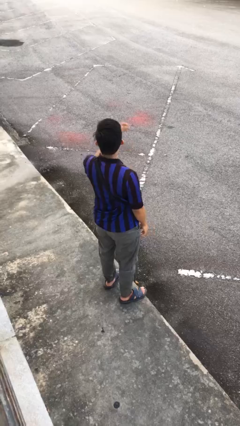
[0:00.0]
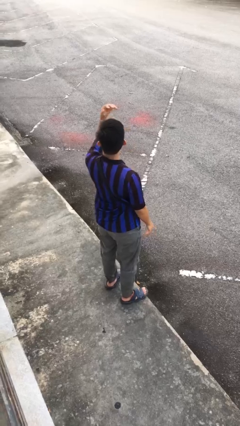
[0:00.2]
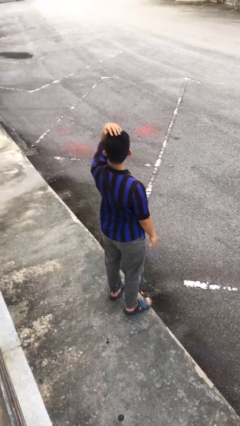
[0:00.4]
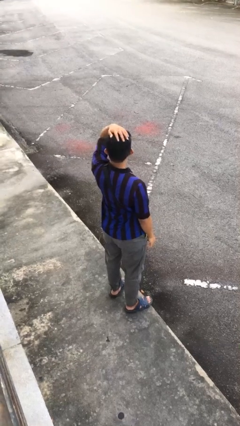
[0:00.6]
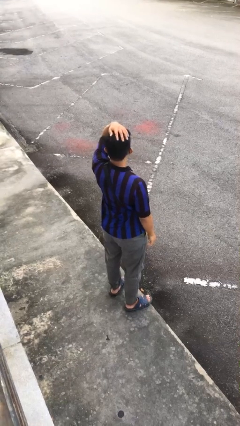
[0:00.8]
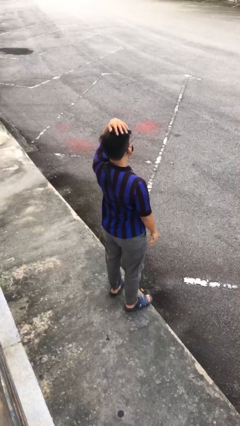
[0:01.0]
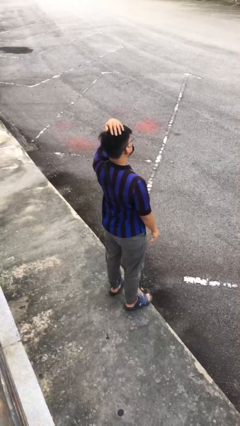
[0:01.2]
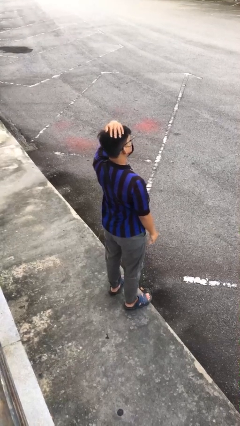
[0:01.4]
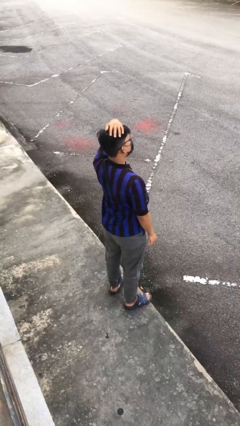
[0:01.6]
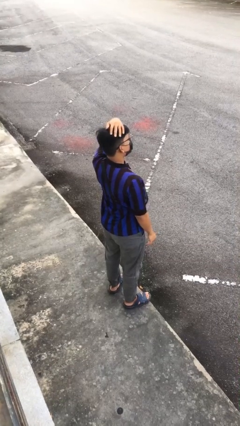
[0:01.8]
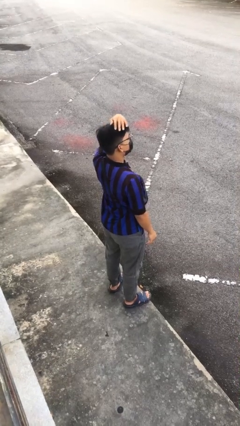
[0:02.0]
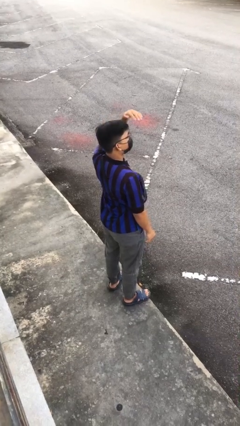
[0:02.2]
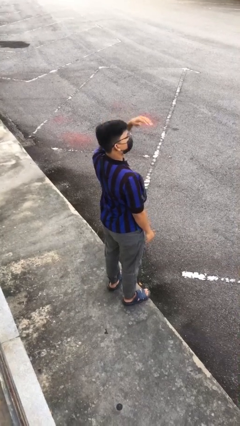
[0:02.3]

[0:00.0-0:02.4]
person pats head

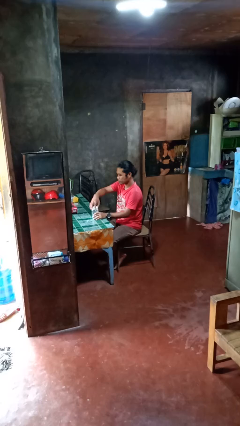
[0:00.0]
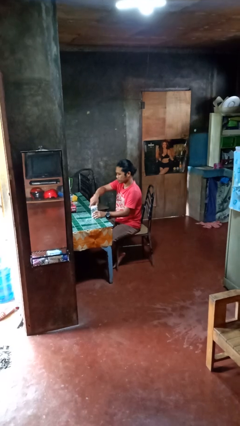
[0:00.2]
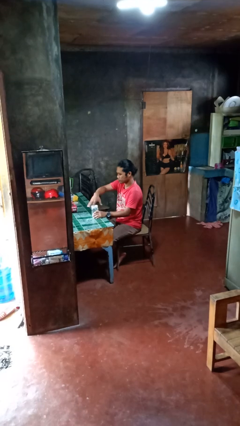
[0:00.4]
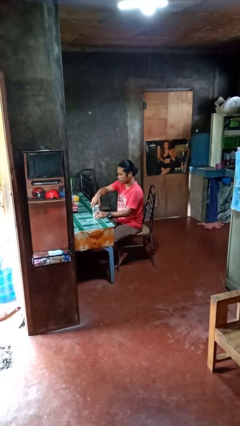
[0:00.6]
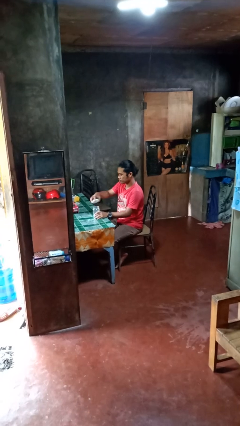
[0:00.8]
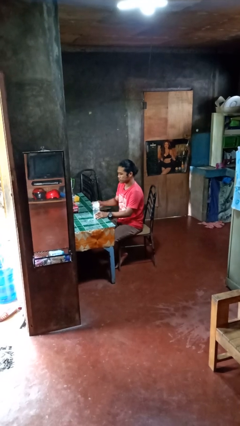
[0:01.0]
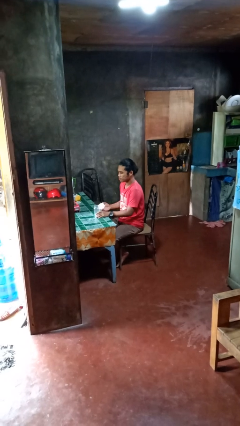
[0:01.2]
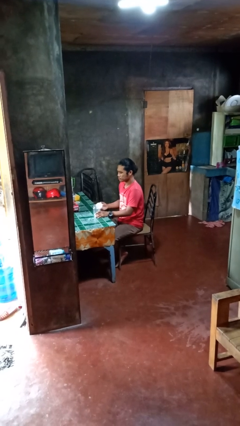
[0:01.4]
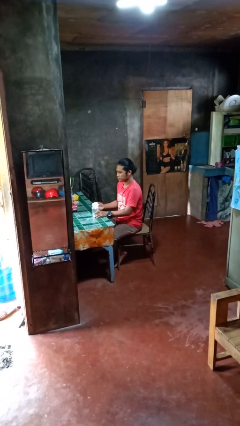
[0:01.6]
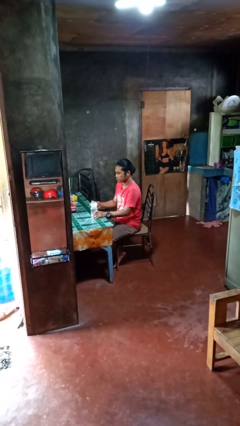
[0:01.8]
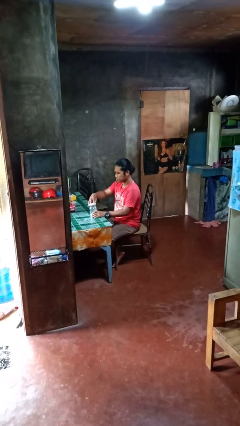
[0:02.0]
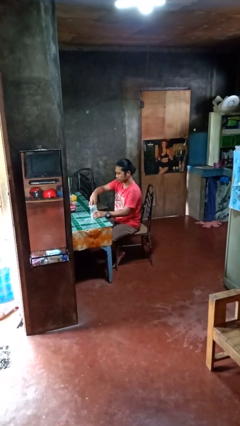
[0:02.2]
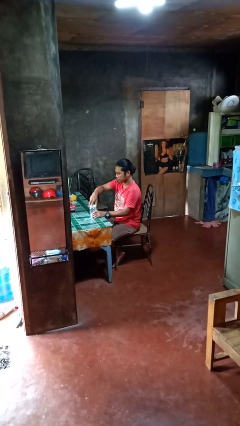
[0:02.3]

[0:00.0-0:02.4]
person opens jar

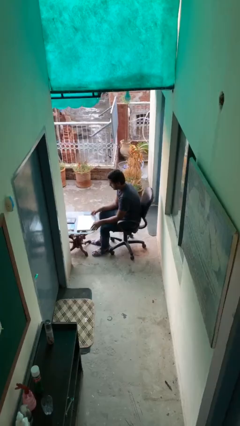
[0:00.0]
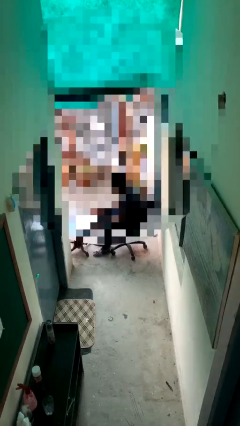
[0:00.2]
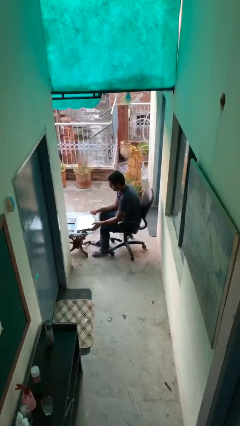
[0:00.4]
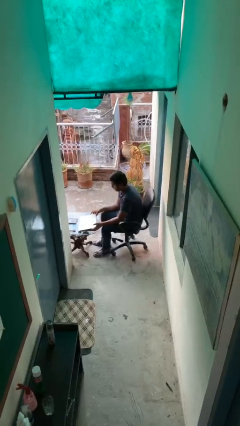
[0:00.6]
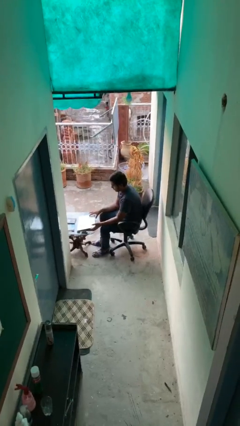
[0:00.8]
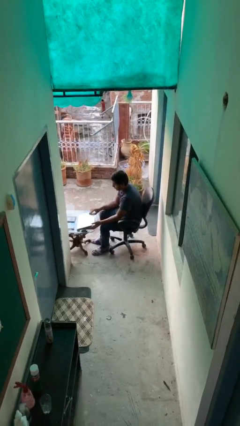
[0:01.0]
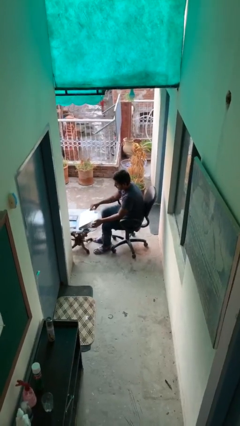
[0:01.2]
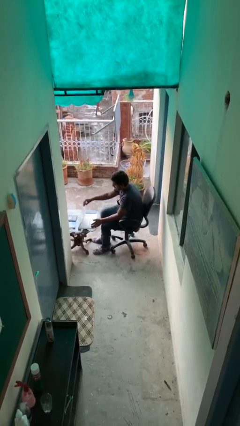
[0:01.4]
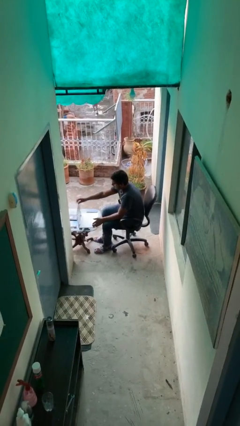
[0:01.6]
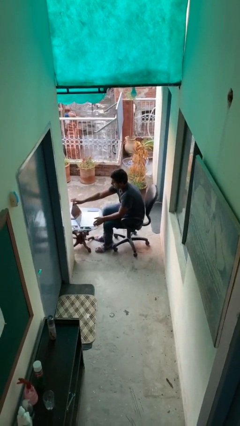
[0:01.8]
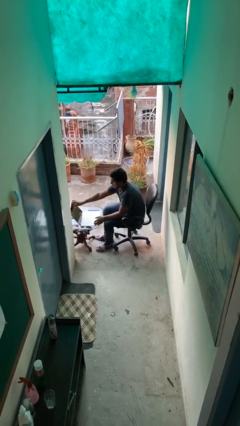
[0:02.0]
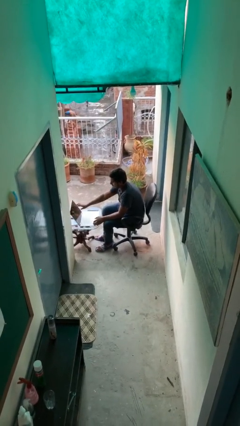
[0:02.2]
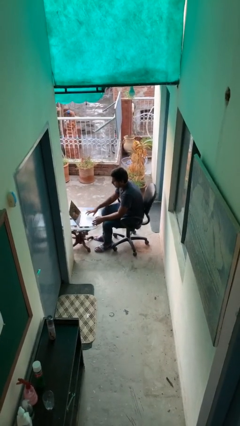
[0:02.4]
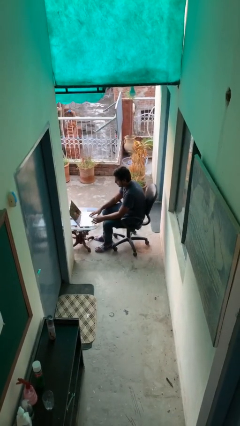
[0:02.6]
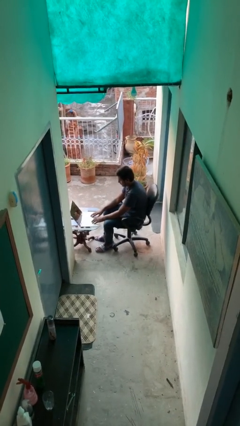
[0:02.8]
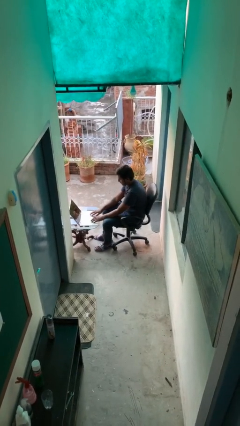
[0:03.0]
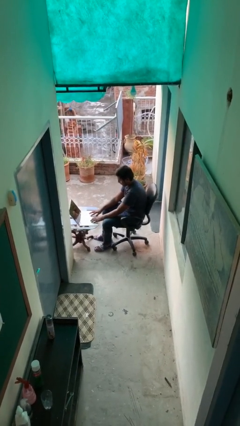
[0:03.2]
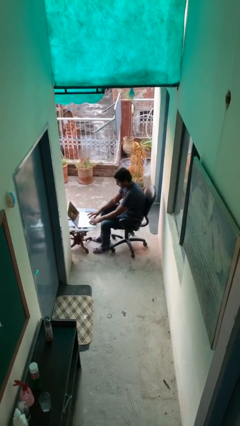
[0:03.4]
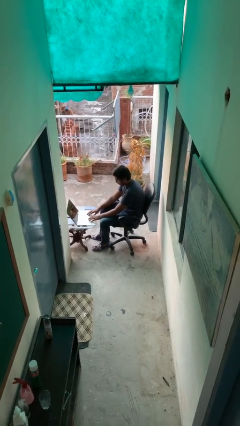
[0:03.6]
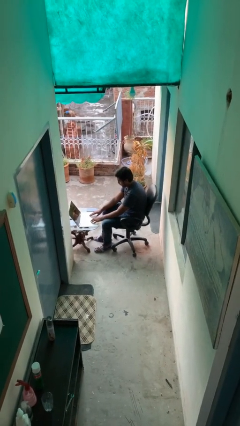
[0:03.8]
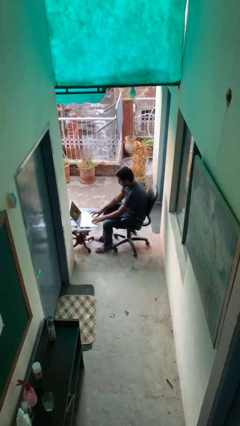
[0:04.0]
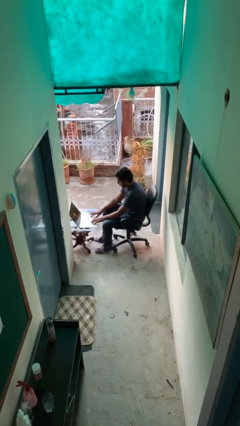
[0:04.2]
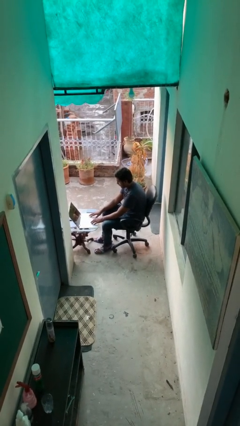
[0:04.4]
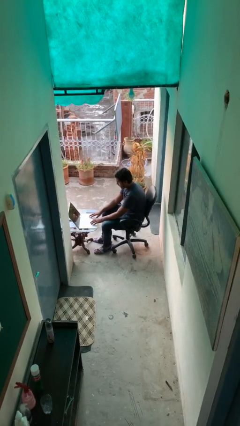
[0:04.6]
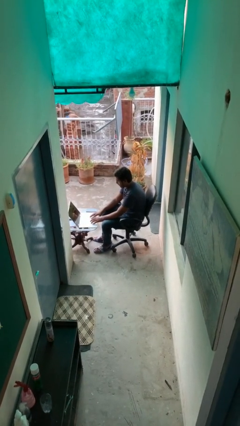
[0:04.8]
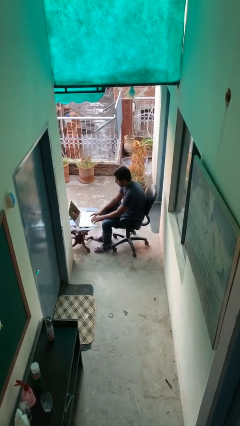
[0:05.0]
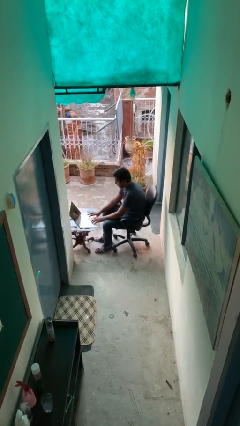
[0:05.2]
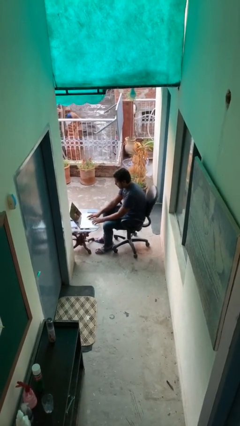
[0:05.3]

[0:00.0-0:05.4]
person interacts with laptop

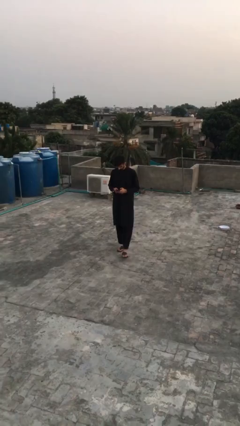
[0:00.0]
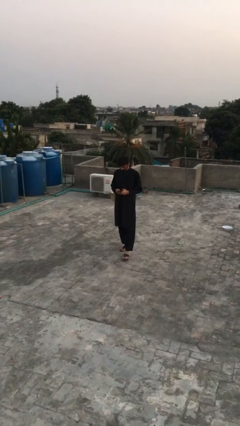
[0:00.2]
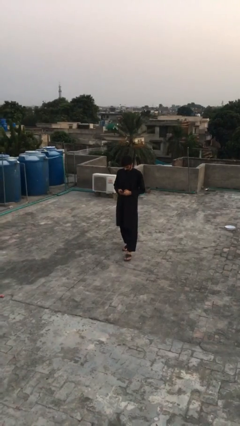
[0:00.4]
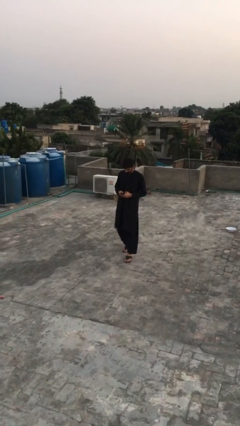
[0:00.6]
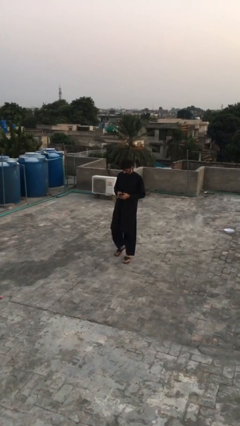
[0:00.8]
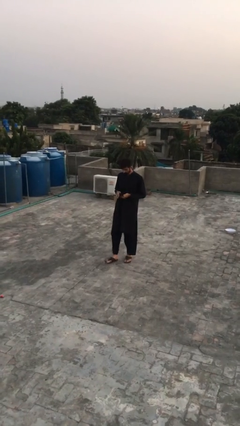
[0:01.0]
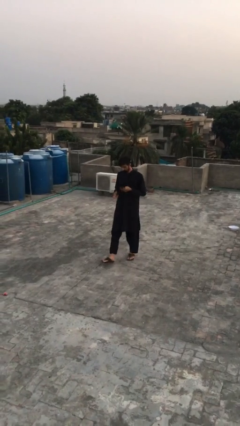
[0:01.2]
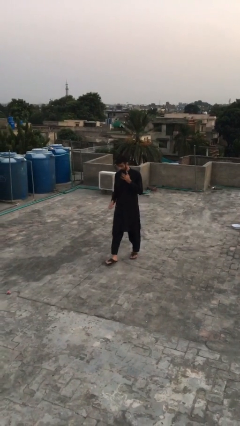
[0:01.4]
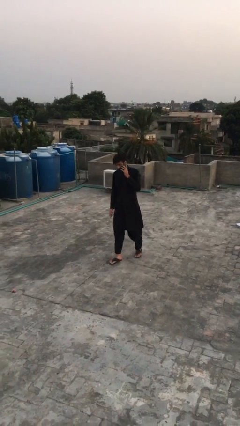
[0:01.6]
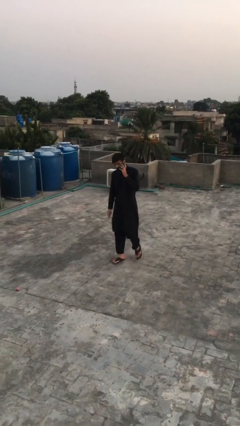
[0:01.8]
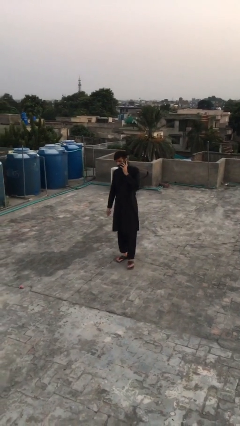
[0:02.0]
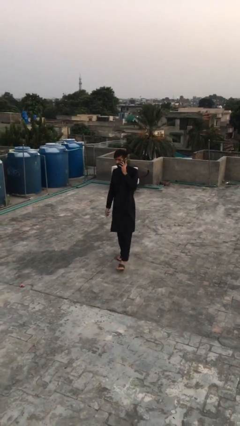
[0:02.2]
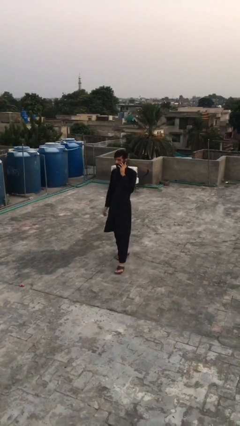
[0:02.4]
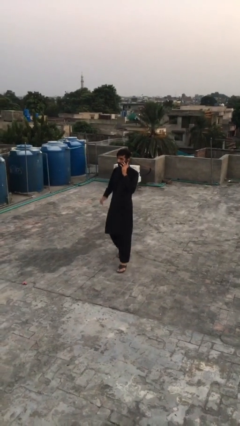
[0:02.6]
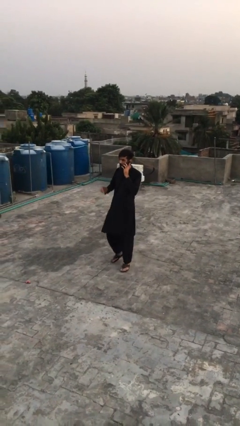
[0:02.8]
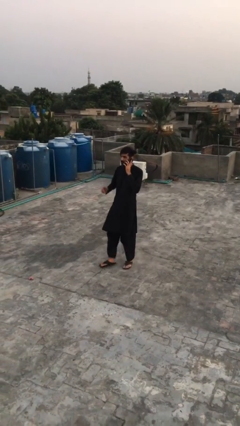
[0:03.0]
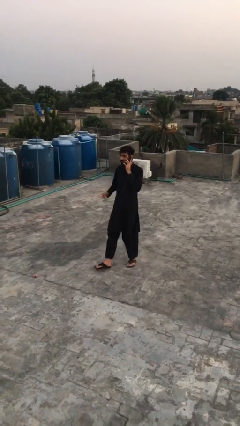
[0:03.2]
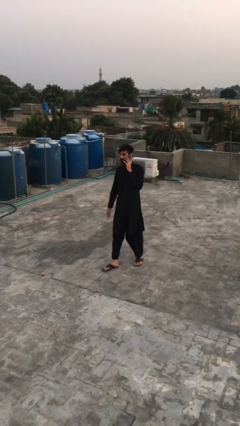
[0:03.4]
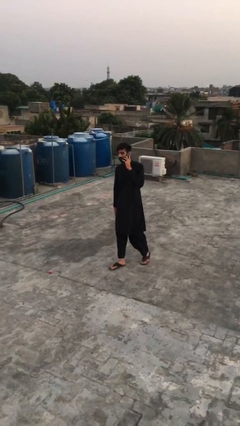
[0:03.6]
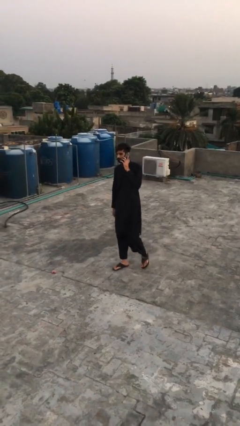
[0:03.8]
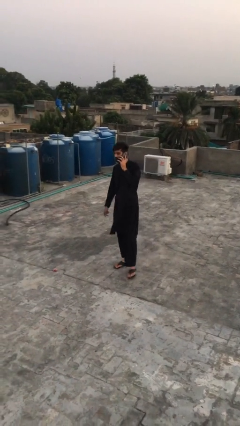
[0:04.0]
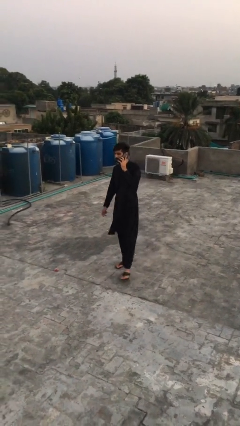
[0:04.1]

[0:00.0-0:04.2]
person talks on phone

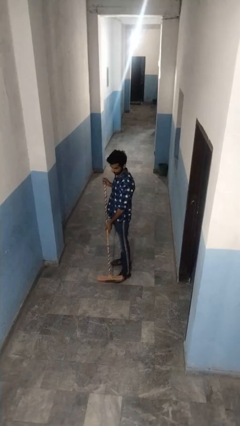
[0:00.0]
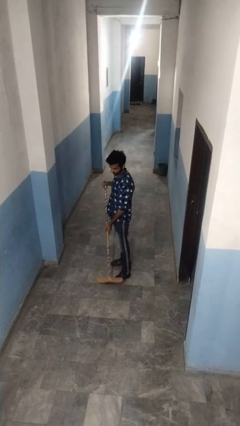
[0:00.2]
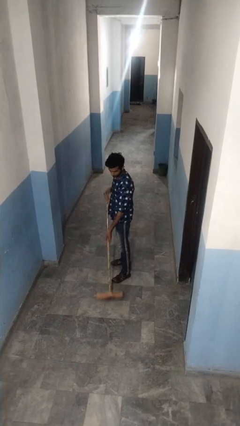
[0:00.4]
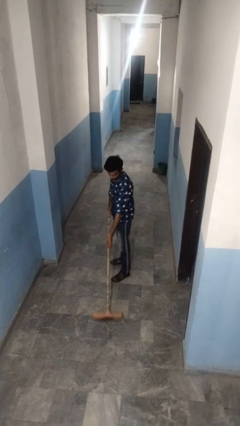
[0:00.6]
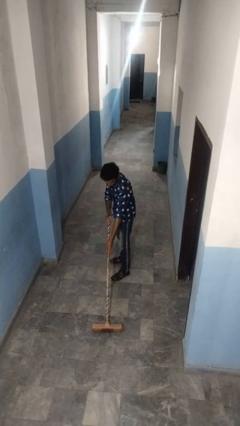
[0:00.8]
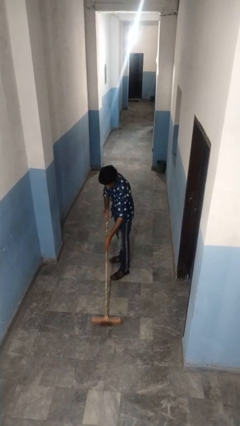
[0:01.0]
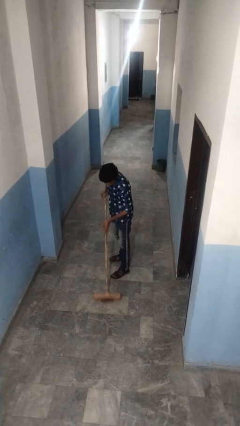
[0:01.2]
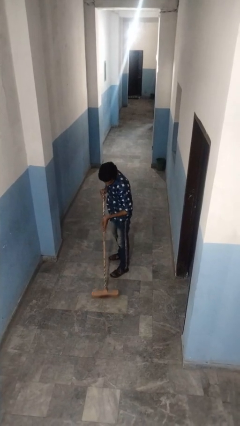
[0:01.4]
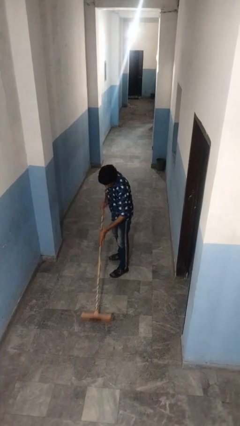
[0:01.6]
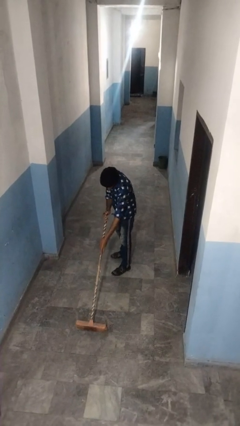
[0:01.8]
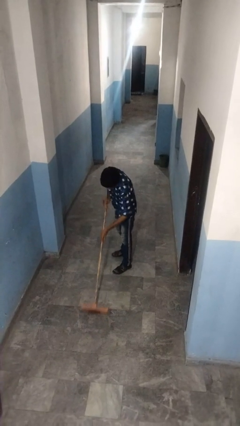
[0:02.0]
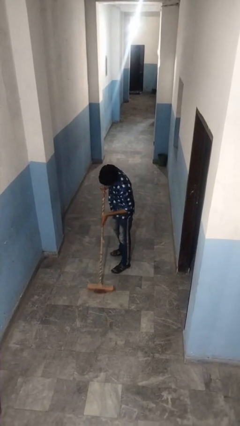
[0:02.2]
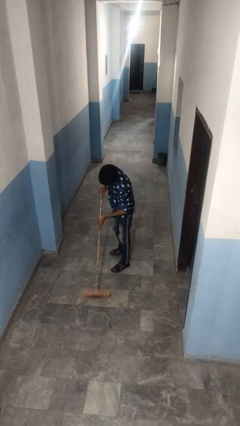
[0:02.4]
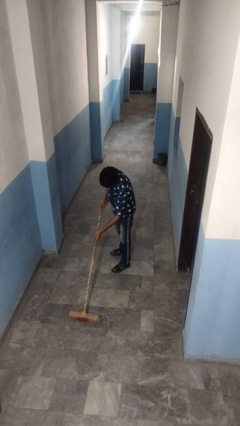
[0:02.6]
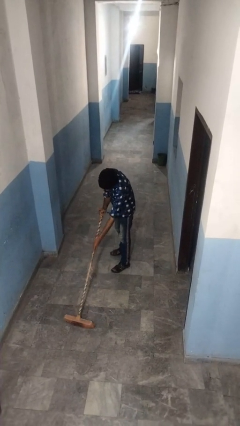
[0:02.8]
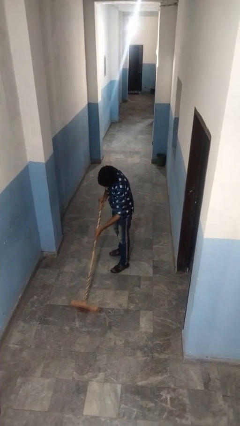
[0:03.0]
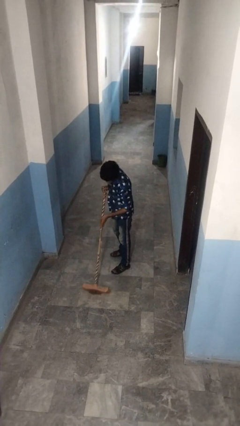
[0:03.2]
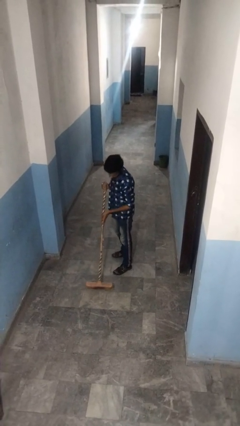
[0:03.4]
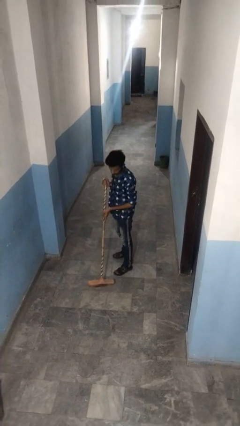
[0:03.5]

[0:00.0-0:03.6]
person sweeps floor
